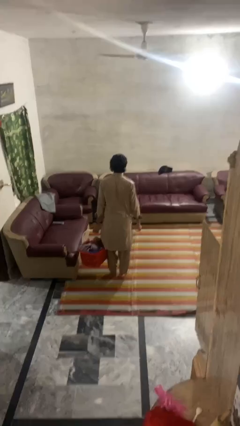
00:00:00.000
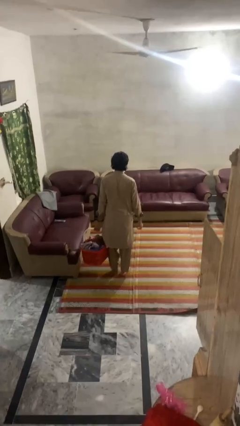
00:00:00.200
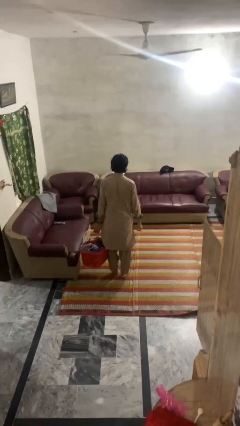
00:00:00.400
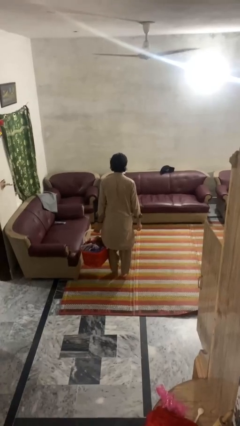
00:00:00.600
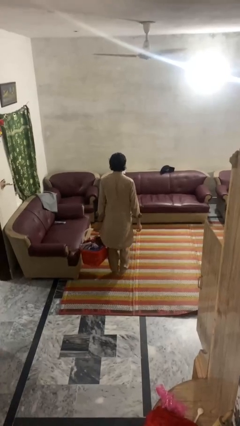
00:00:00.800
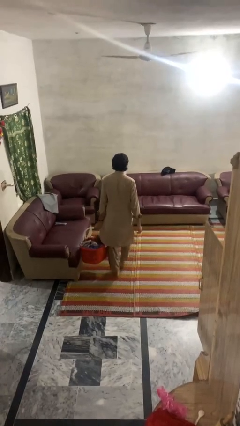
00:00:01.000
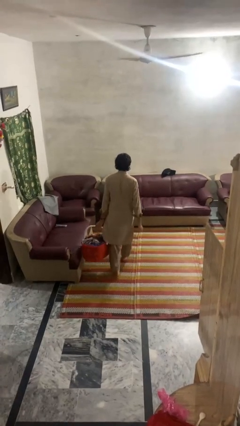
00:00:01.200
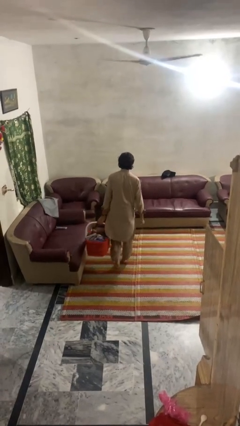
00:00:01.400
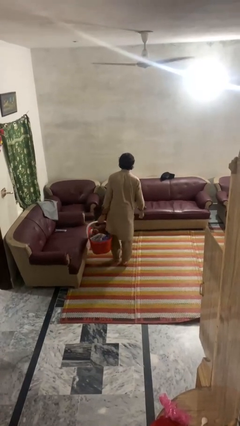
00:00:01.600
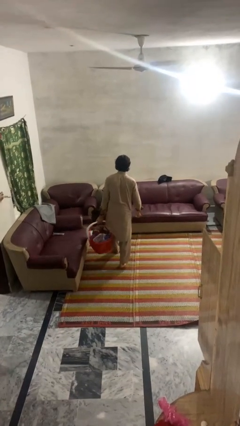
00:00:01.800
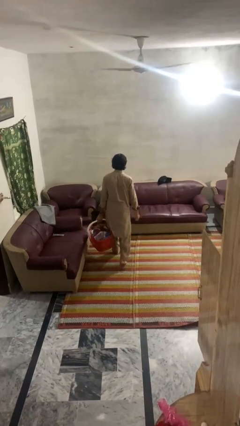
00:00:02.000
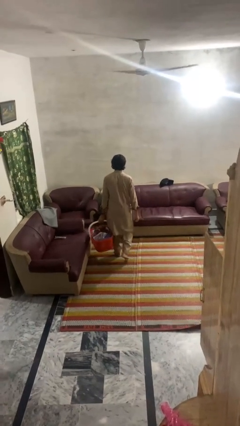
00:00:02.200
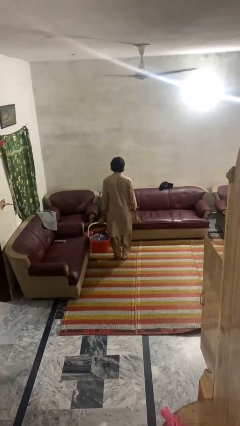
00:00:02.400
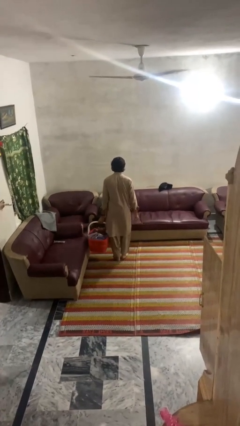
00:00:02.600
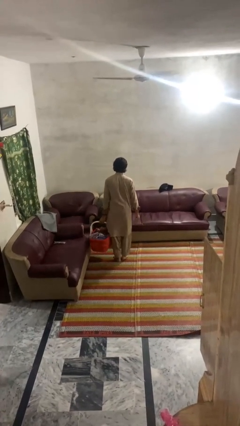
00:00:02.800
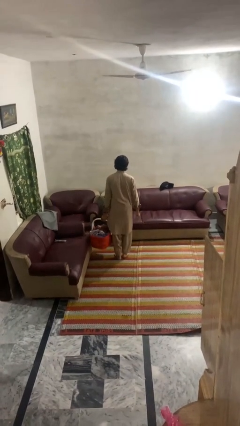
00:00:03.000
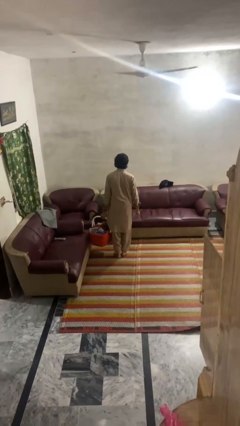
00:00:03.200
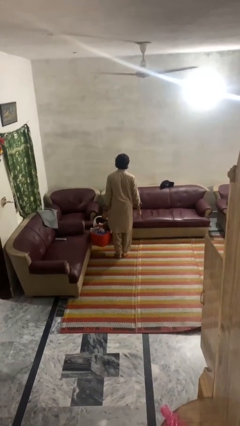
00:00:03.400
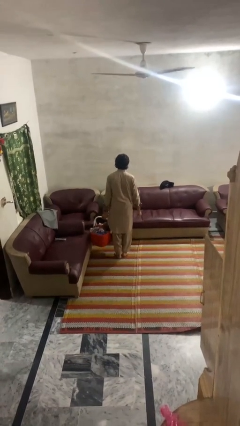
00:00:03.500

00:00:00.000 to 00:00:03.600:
person carries laundry basket

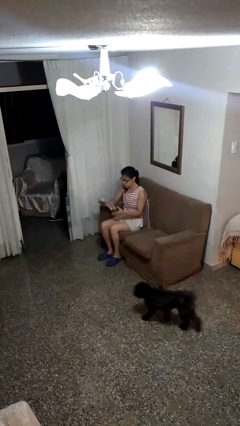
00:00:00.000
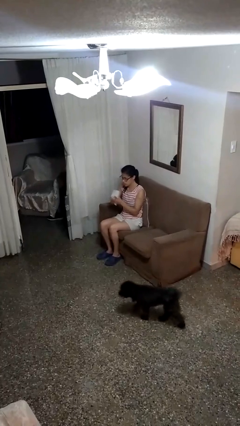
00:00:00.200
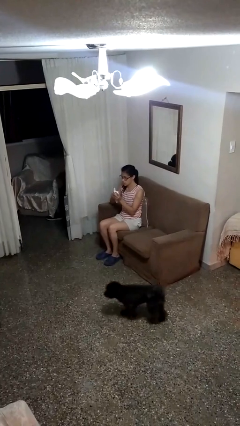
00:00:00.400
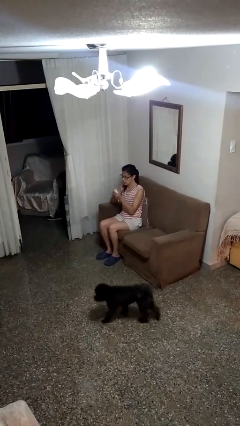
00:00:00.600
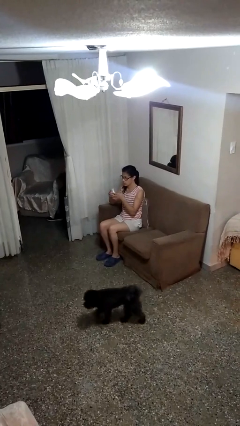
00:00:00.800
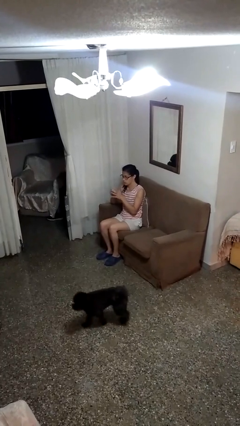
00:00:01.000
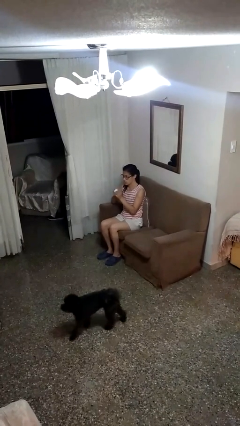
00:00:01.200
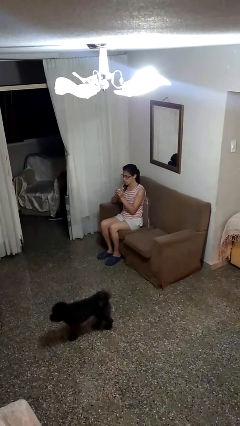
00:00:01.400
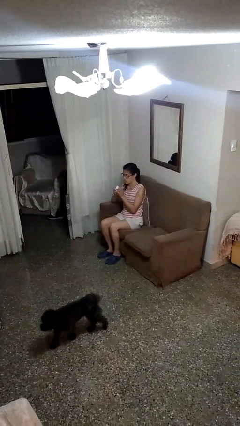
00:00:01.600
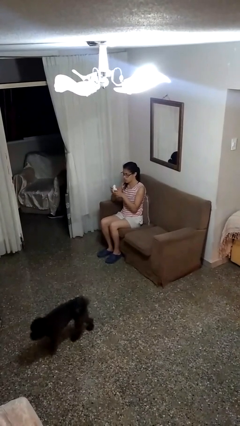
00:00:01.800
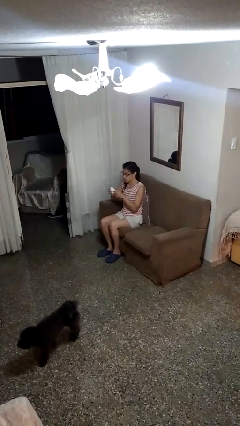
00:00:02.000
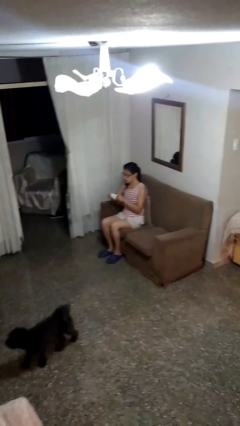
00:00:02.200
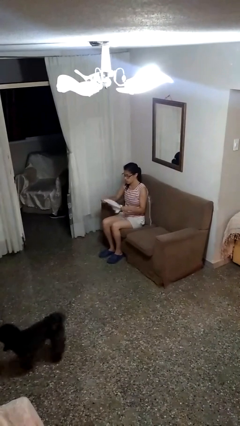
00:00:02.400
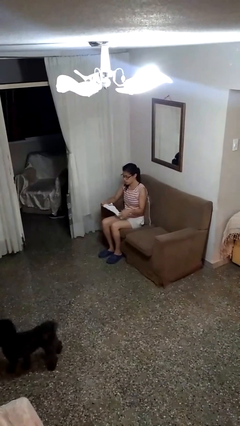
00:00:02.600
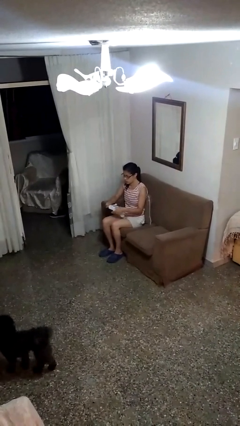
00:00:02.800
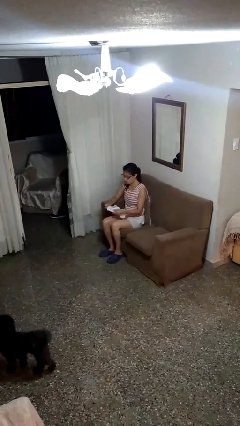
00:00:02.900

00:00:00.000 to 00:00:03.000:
person crumples paper

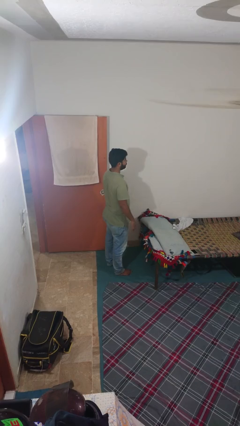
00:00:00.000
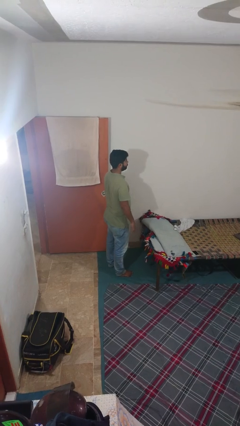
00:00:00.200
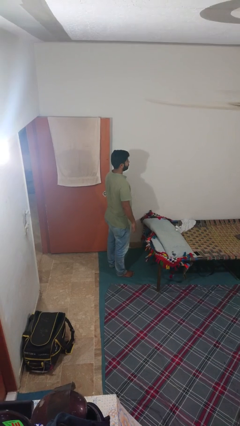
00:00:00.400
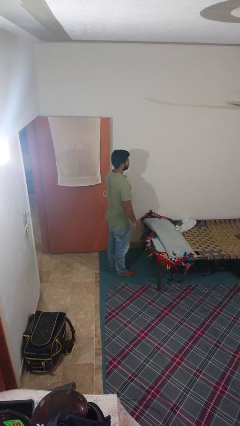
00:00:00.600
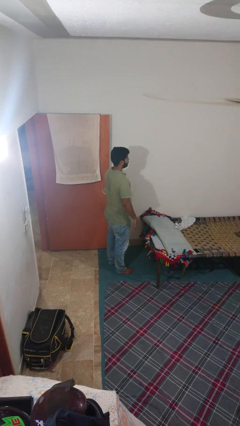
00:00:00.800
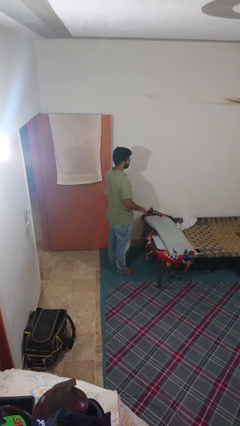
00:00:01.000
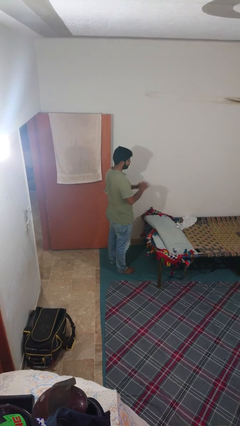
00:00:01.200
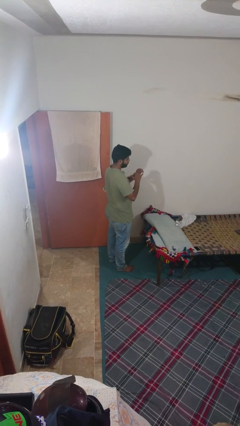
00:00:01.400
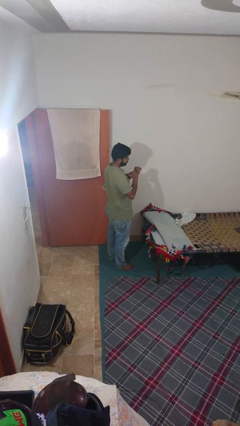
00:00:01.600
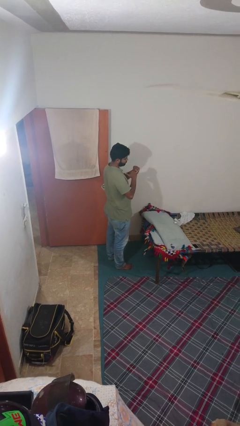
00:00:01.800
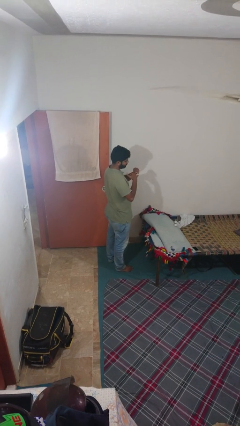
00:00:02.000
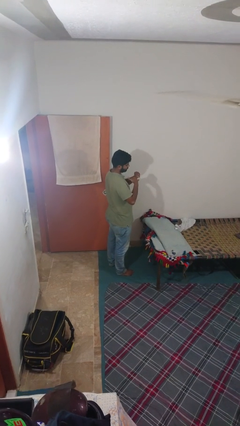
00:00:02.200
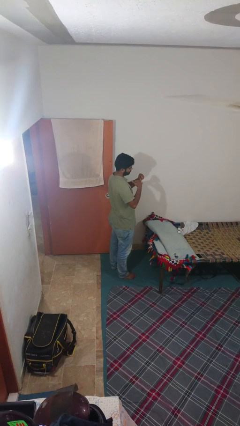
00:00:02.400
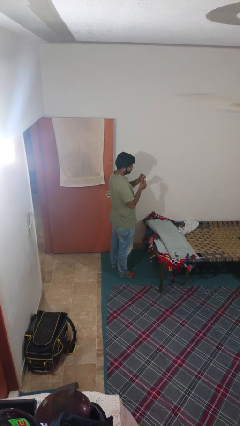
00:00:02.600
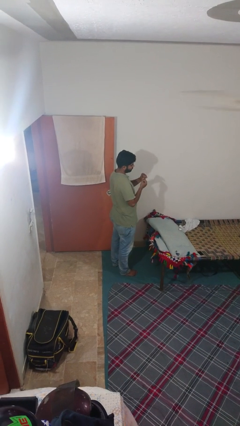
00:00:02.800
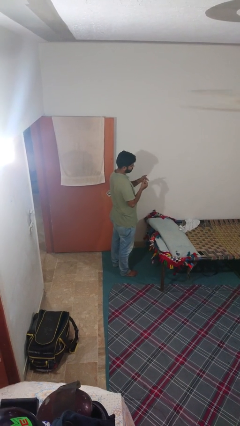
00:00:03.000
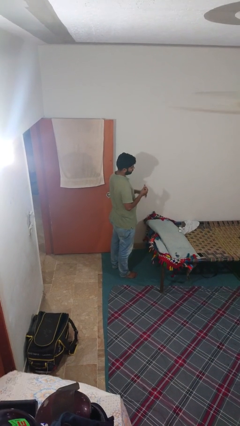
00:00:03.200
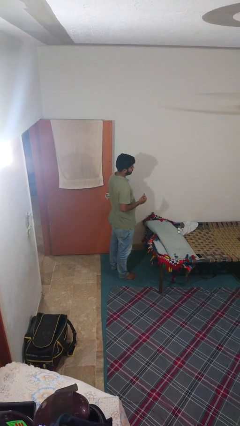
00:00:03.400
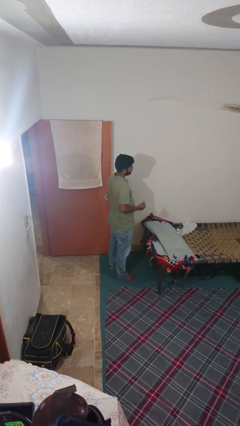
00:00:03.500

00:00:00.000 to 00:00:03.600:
person takes off ring

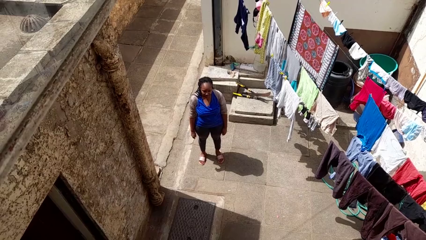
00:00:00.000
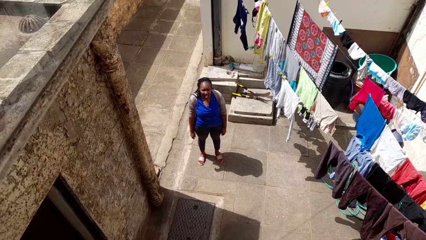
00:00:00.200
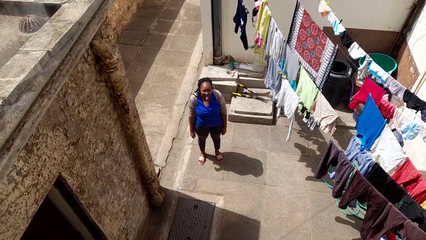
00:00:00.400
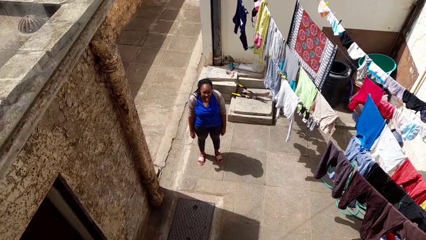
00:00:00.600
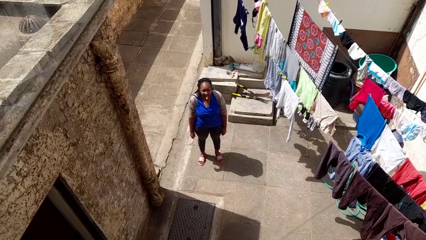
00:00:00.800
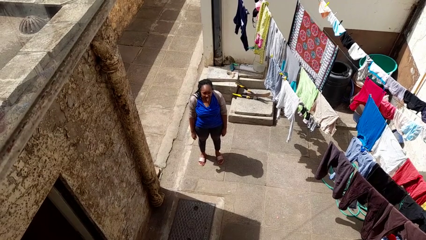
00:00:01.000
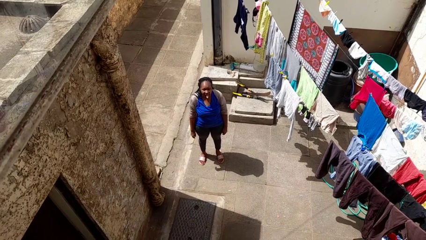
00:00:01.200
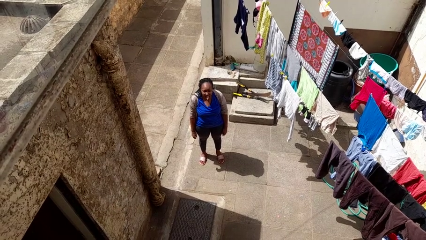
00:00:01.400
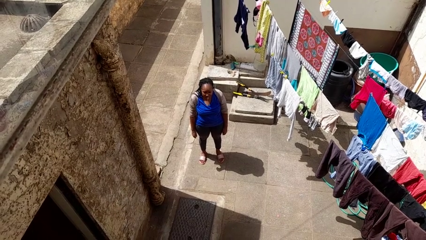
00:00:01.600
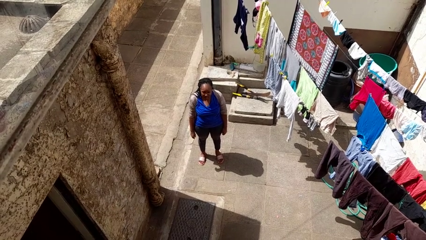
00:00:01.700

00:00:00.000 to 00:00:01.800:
person sticks out tongue

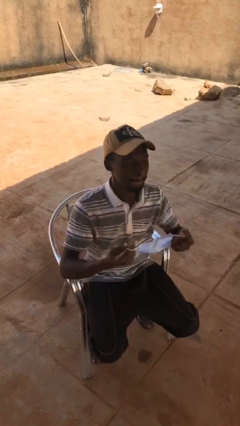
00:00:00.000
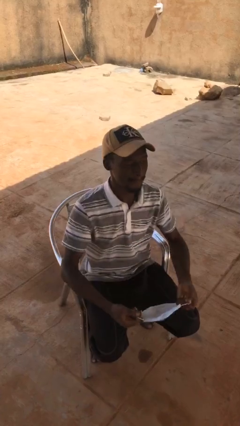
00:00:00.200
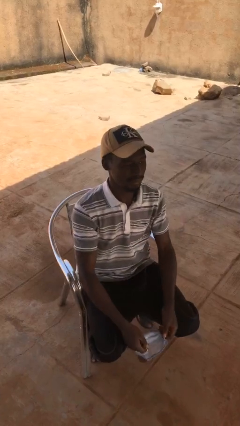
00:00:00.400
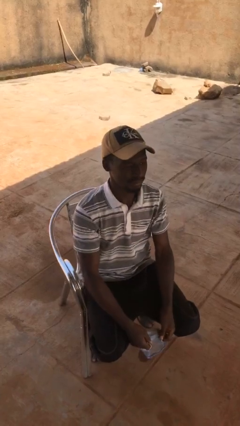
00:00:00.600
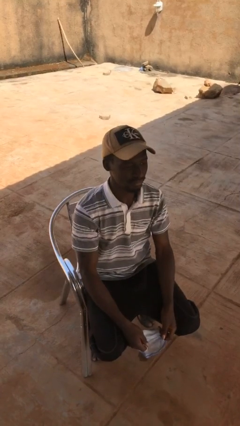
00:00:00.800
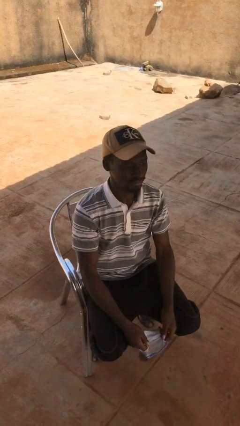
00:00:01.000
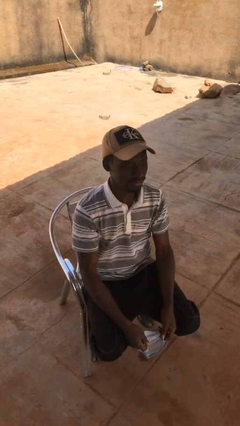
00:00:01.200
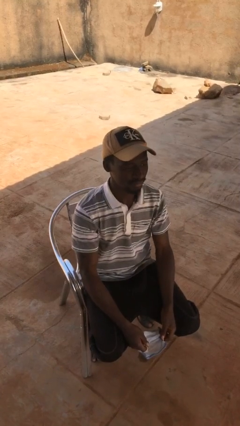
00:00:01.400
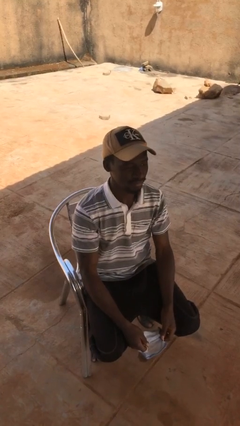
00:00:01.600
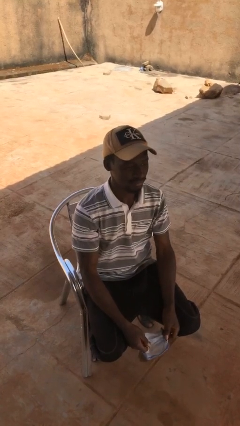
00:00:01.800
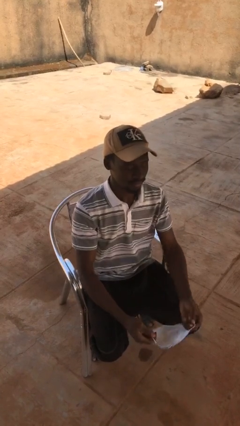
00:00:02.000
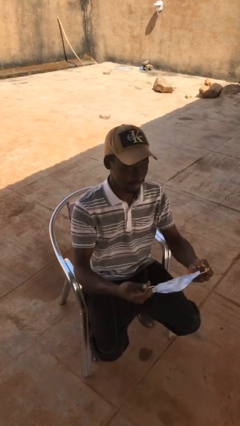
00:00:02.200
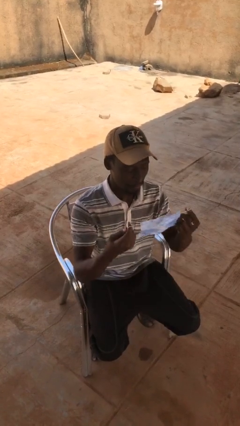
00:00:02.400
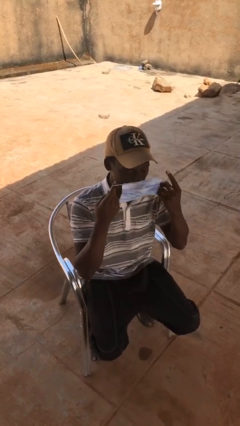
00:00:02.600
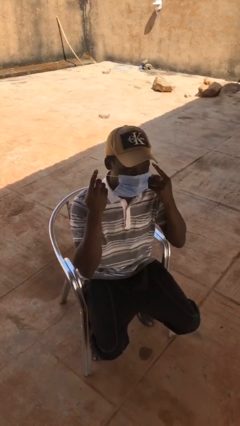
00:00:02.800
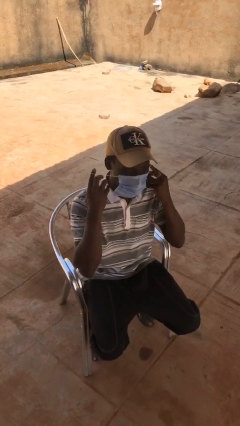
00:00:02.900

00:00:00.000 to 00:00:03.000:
person takes off facemask

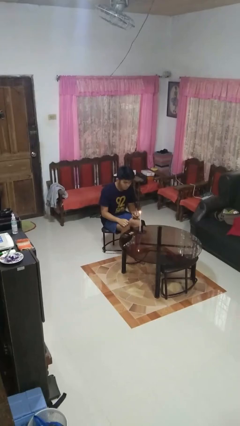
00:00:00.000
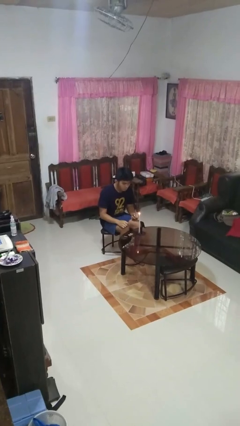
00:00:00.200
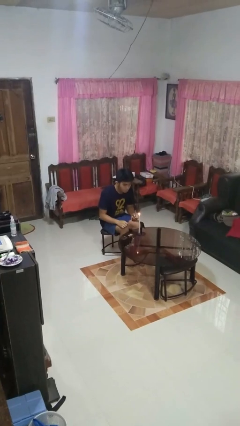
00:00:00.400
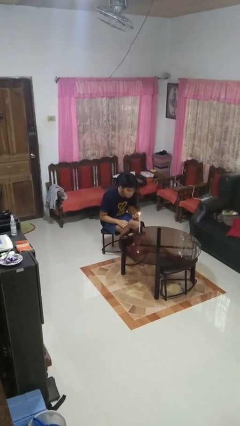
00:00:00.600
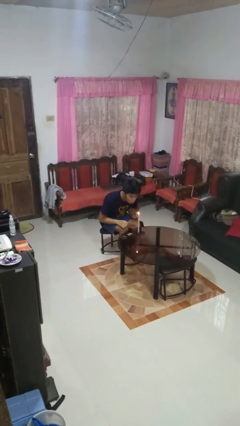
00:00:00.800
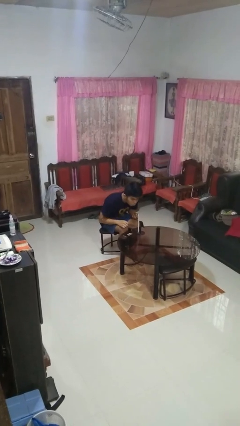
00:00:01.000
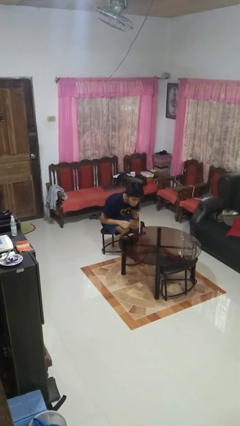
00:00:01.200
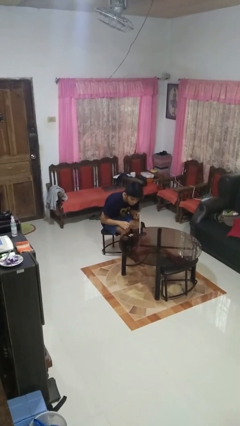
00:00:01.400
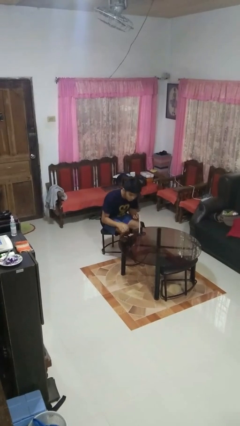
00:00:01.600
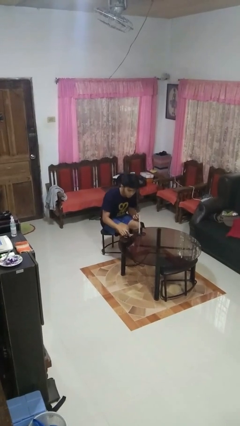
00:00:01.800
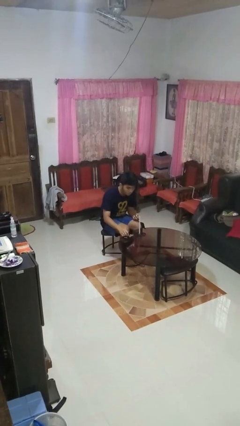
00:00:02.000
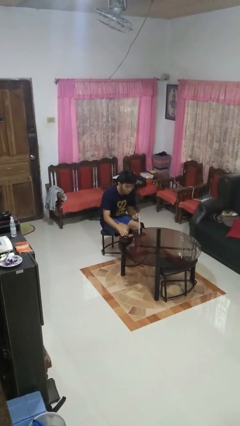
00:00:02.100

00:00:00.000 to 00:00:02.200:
person extinguishes candle
